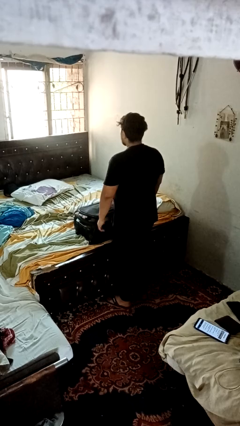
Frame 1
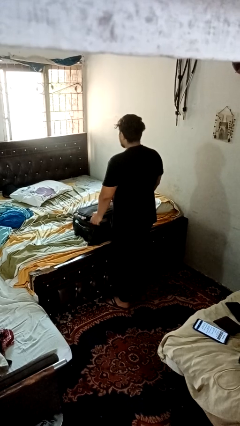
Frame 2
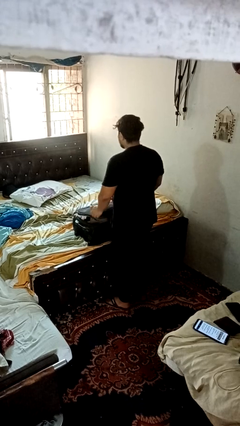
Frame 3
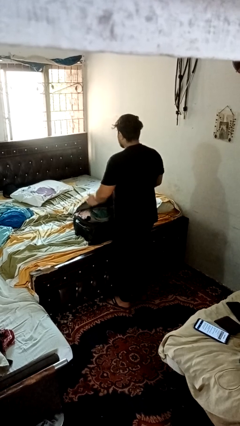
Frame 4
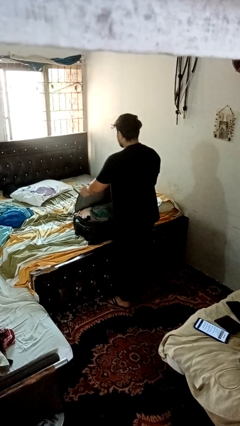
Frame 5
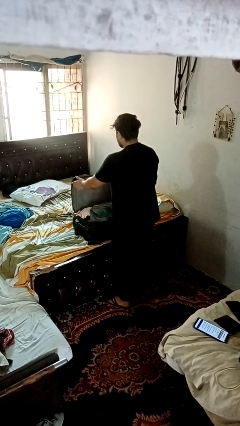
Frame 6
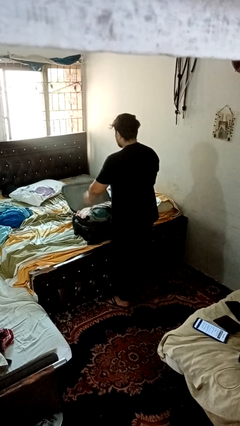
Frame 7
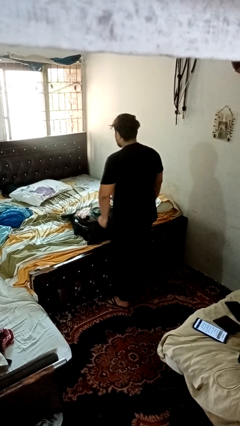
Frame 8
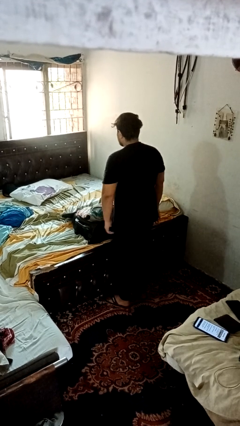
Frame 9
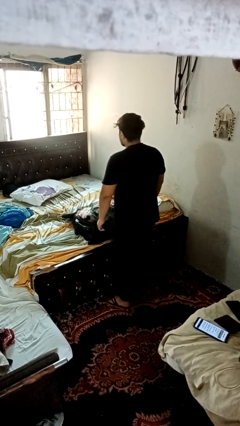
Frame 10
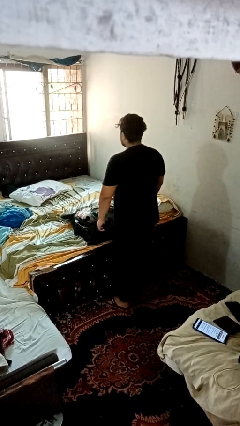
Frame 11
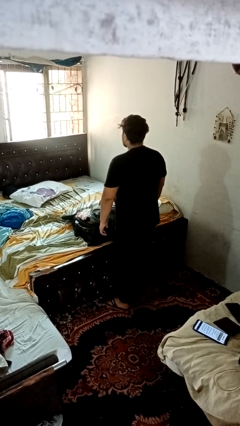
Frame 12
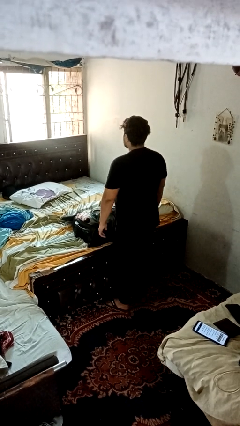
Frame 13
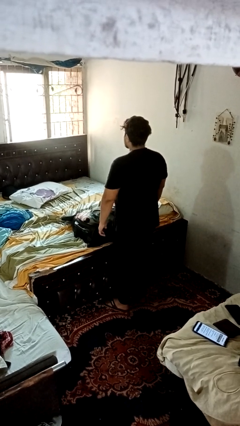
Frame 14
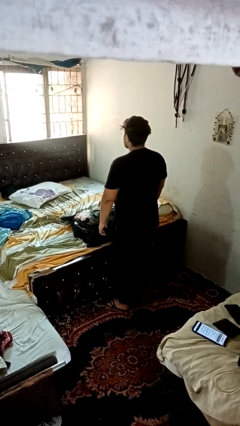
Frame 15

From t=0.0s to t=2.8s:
person opens suitcase

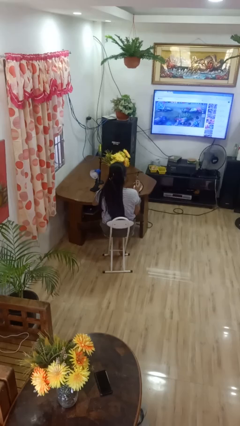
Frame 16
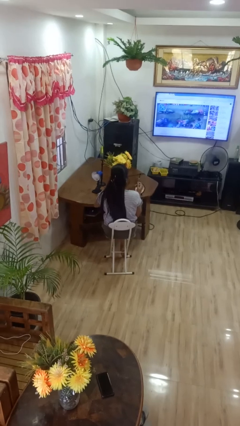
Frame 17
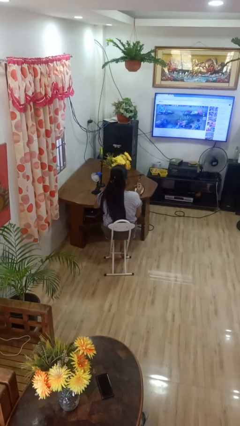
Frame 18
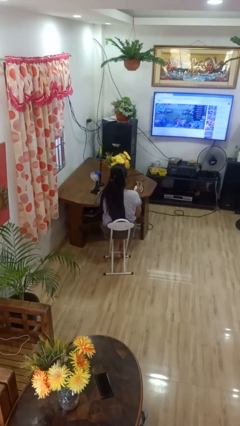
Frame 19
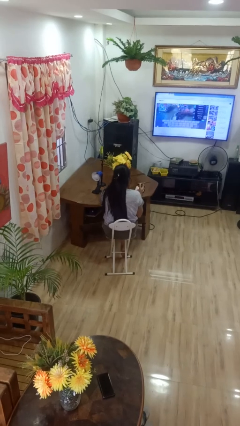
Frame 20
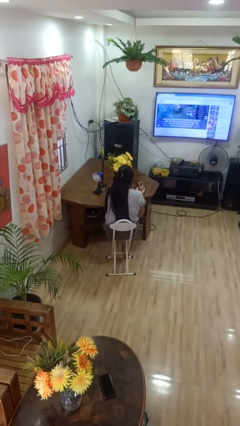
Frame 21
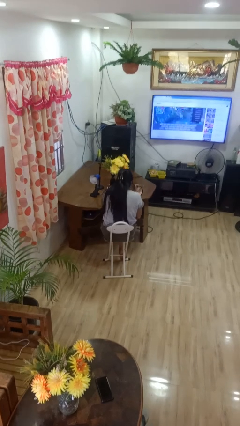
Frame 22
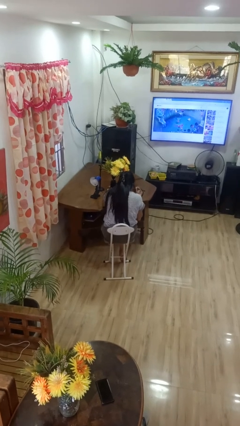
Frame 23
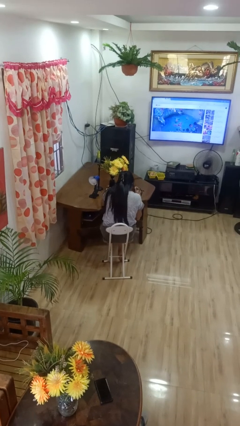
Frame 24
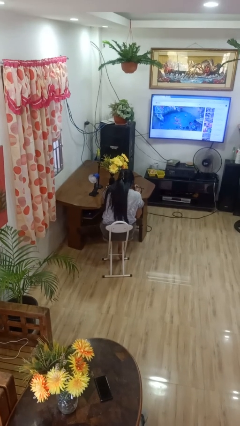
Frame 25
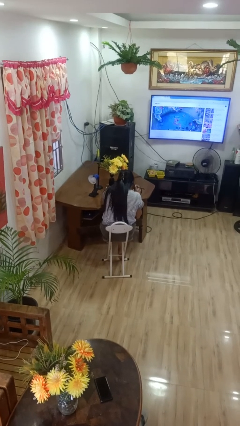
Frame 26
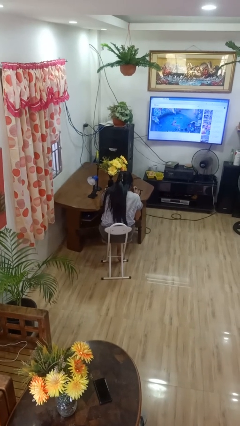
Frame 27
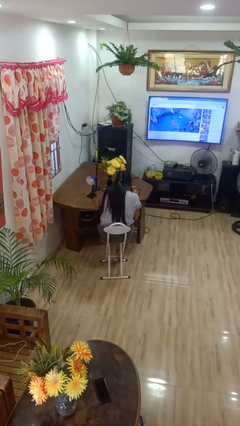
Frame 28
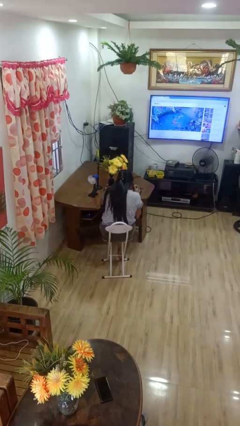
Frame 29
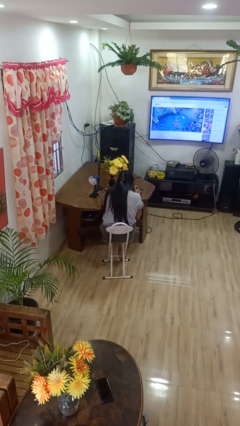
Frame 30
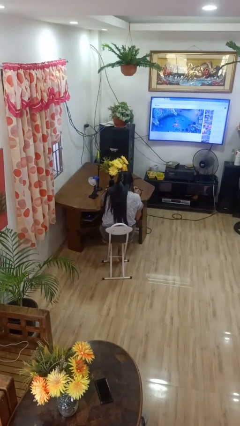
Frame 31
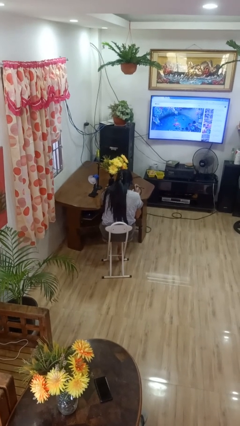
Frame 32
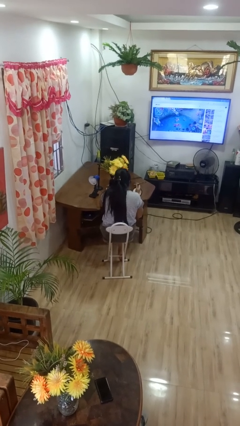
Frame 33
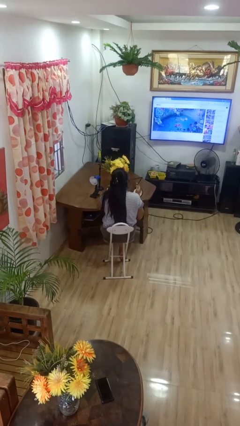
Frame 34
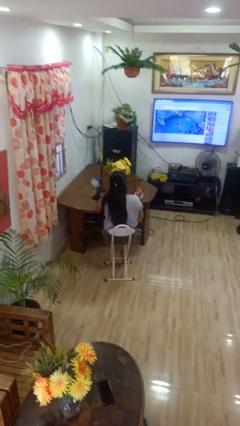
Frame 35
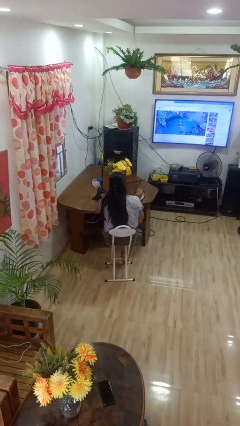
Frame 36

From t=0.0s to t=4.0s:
person applies eye makeup

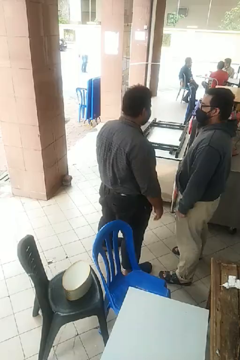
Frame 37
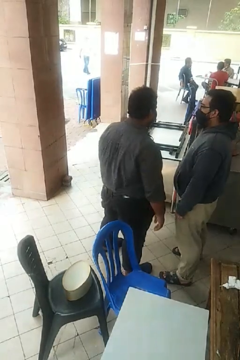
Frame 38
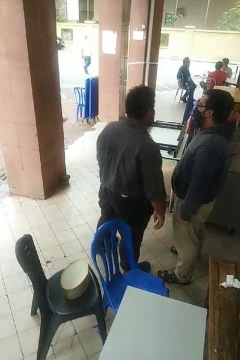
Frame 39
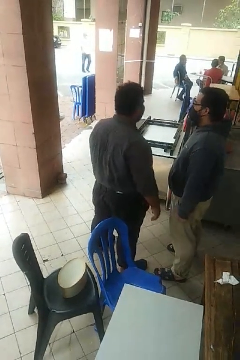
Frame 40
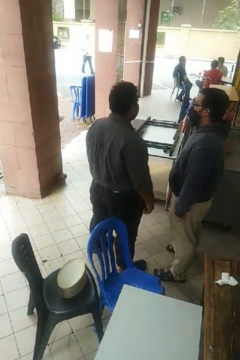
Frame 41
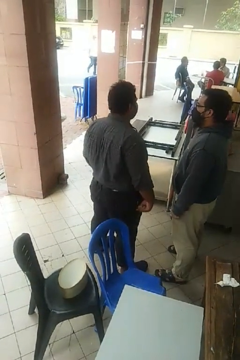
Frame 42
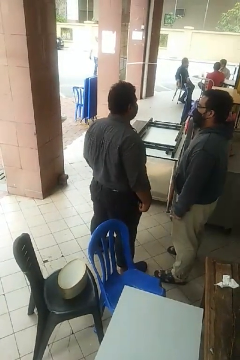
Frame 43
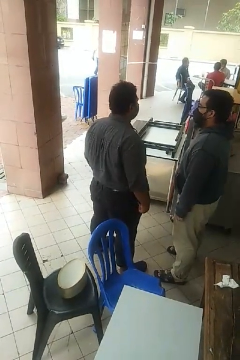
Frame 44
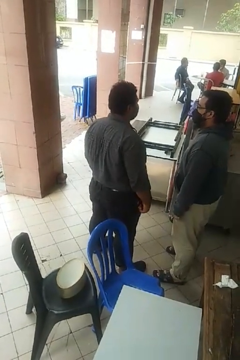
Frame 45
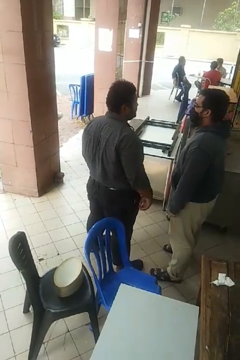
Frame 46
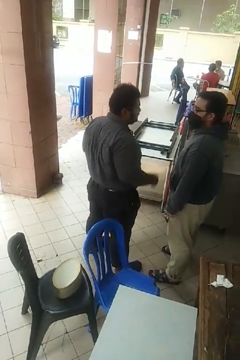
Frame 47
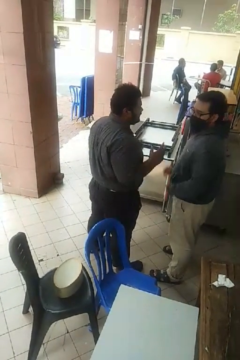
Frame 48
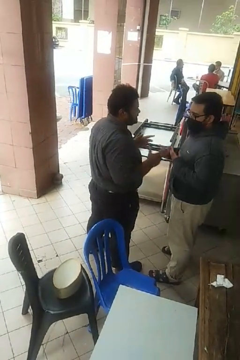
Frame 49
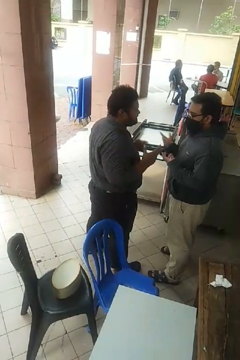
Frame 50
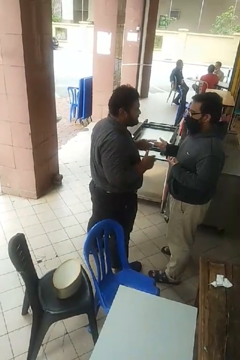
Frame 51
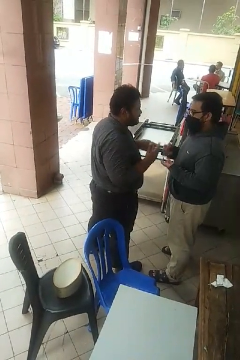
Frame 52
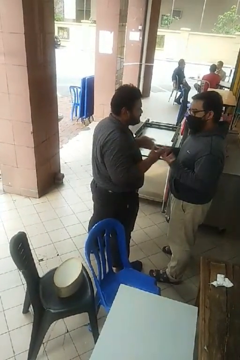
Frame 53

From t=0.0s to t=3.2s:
person talks to person

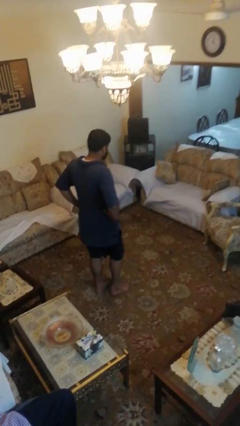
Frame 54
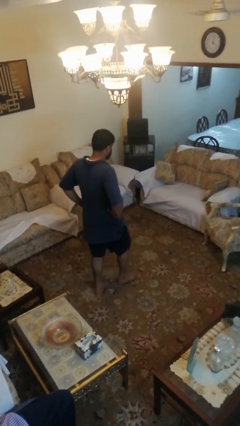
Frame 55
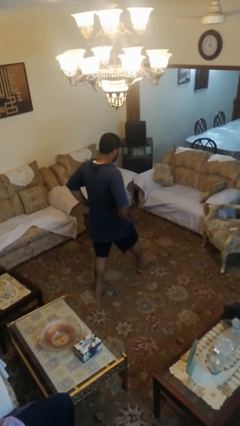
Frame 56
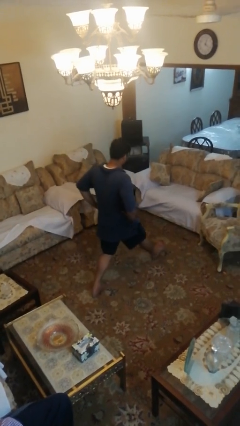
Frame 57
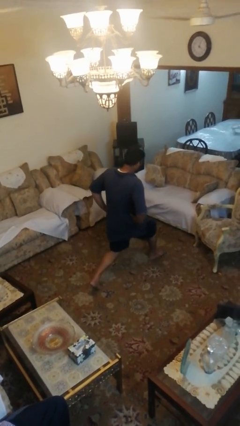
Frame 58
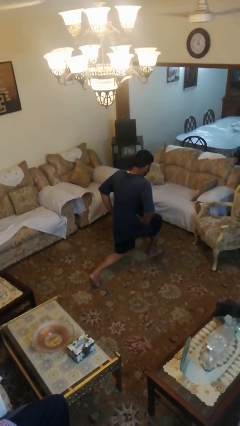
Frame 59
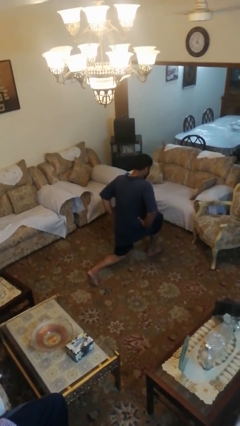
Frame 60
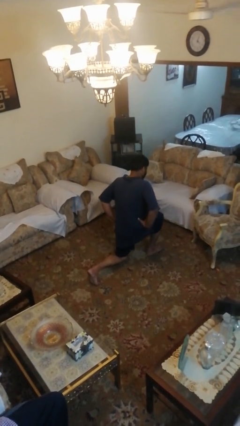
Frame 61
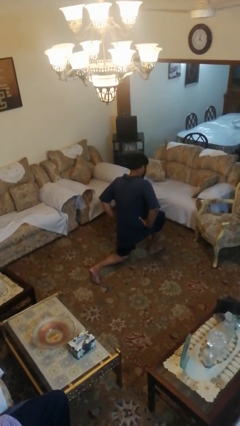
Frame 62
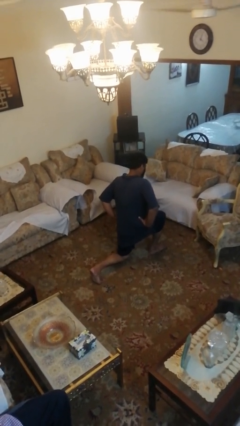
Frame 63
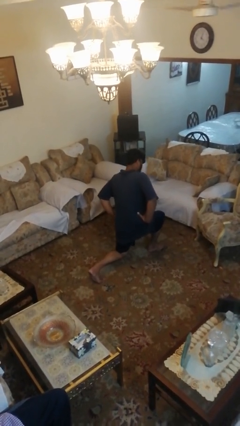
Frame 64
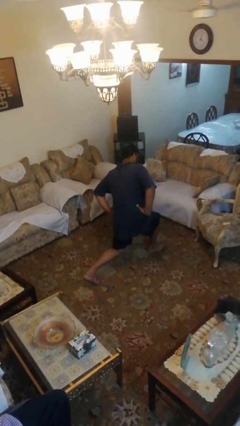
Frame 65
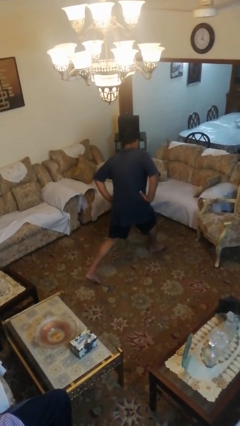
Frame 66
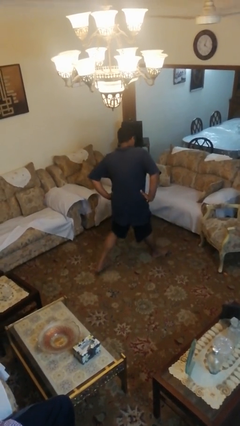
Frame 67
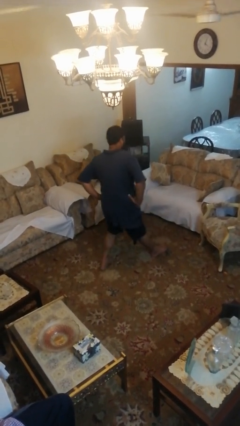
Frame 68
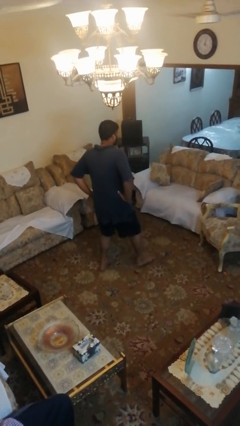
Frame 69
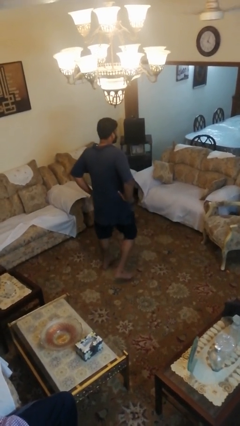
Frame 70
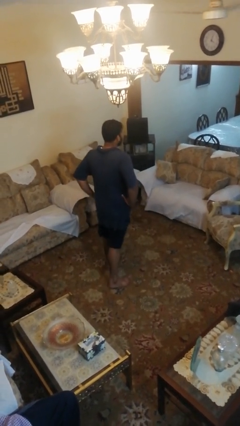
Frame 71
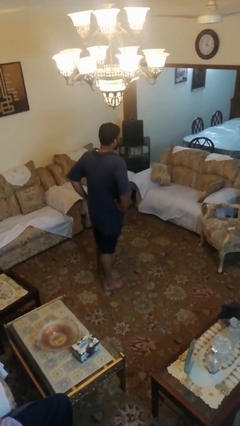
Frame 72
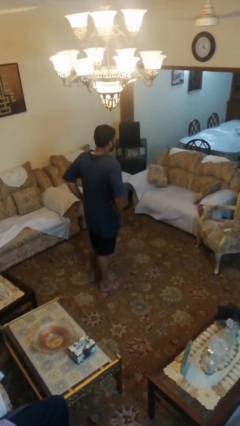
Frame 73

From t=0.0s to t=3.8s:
person exercises with lunges

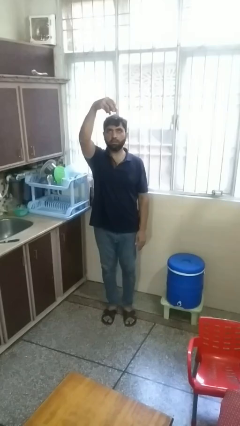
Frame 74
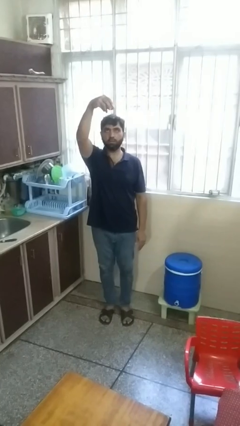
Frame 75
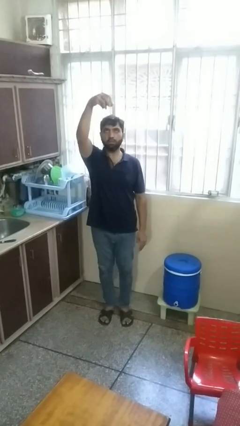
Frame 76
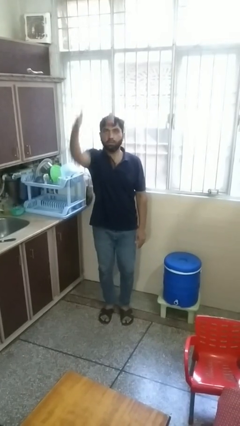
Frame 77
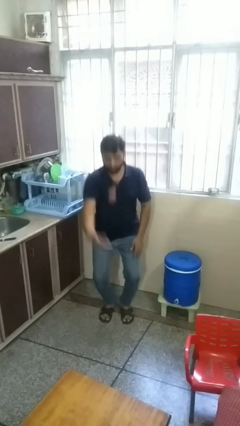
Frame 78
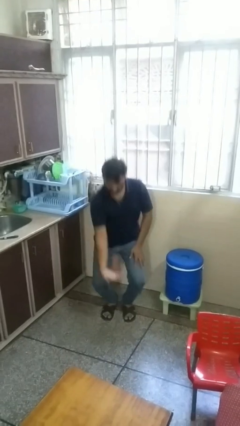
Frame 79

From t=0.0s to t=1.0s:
person drops object

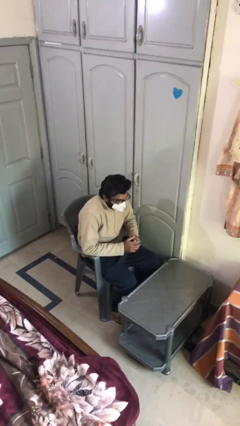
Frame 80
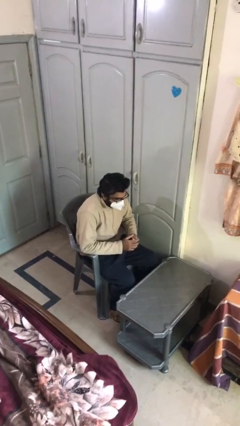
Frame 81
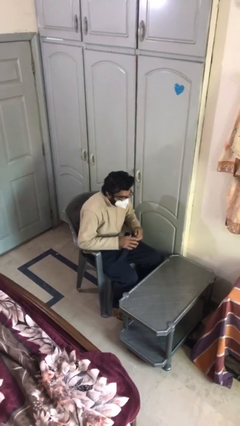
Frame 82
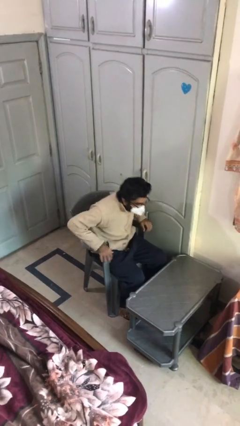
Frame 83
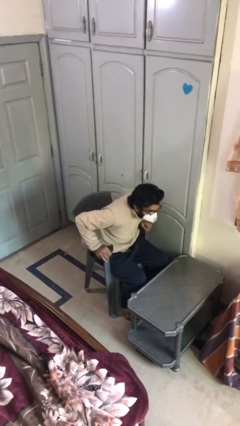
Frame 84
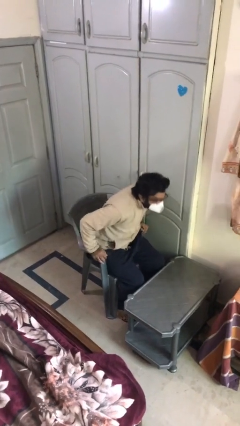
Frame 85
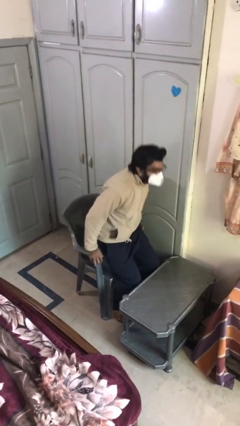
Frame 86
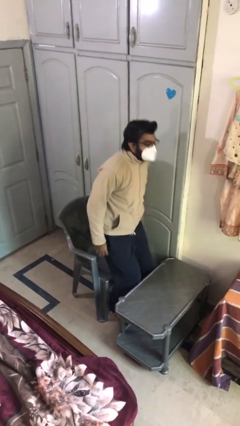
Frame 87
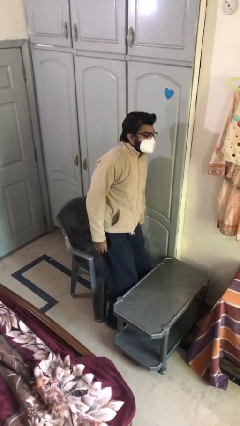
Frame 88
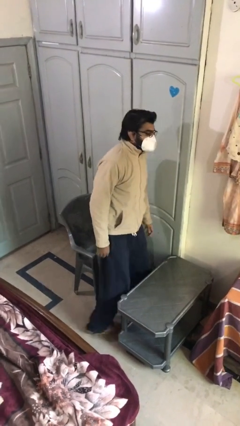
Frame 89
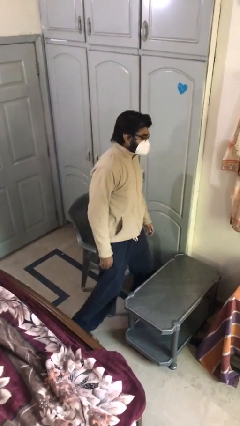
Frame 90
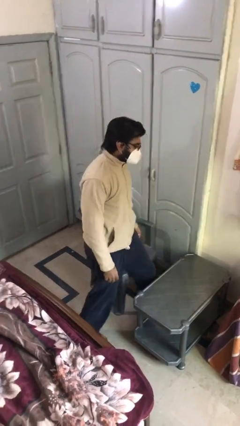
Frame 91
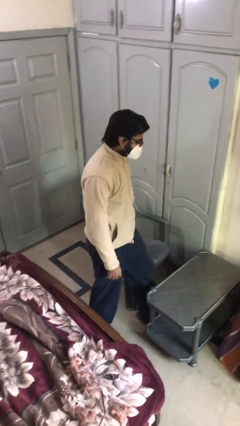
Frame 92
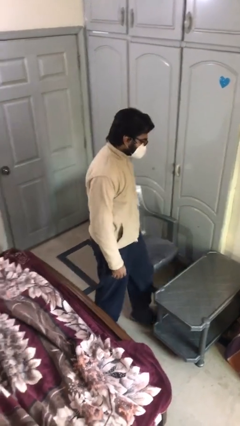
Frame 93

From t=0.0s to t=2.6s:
person stands up

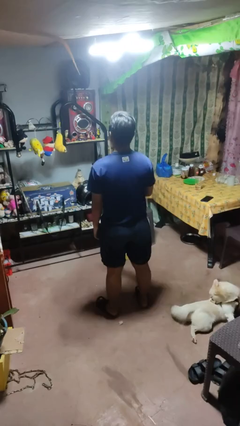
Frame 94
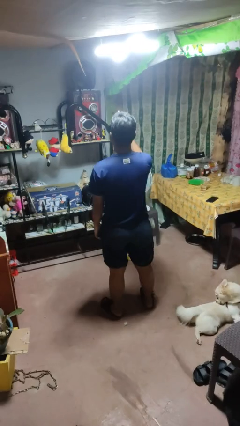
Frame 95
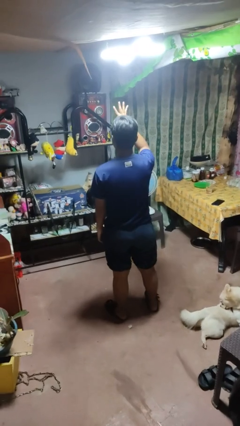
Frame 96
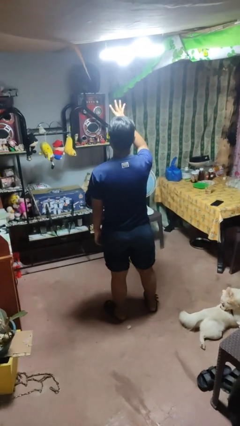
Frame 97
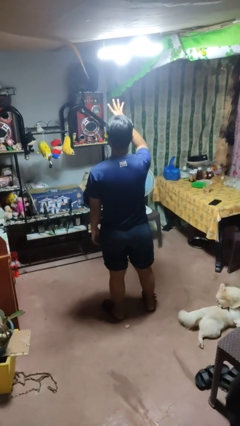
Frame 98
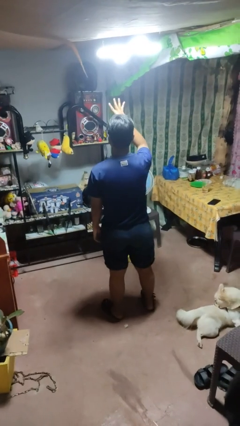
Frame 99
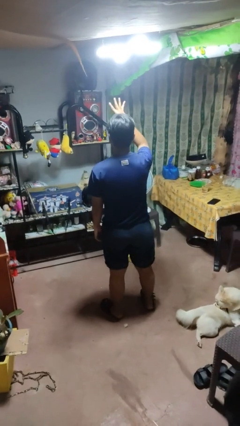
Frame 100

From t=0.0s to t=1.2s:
person gestures number four
